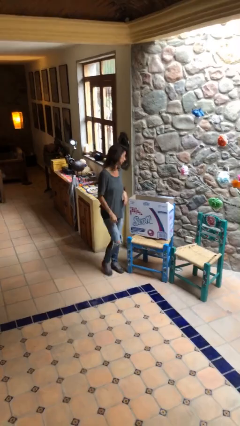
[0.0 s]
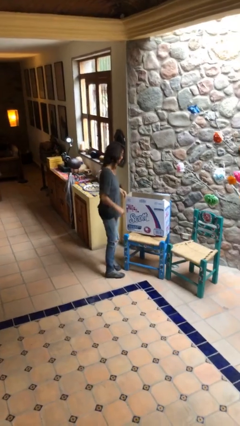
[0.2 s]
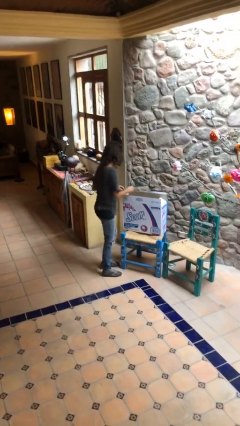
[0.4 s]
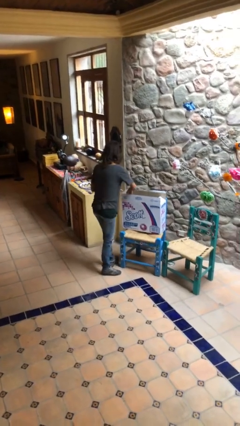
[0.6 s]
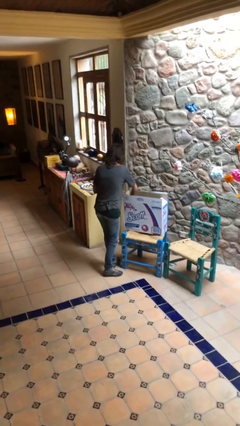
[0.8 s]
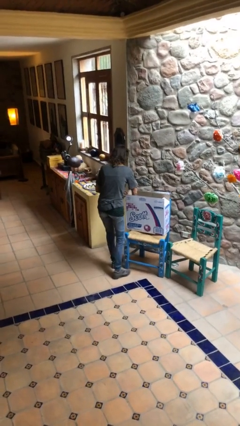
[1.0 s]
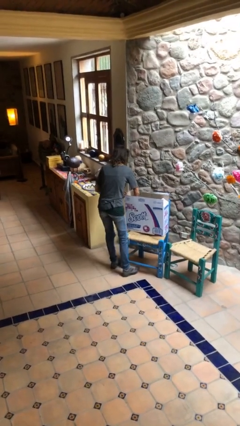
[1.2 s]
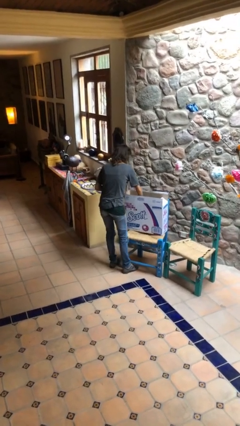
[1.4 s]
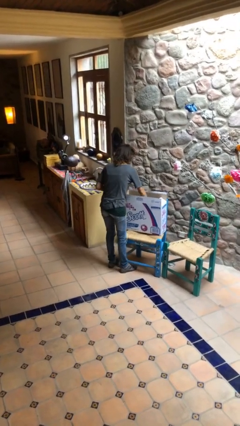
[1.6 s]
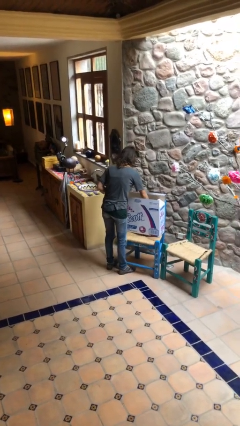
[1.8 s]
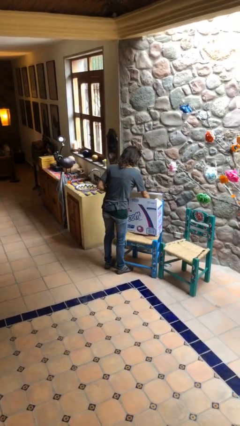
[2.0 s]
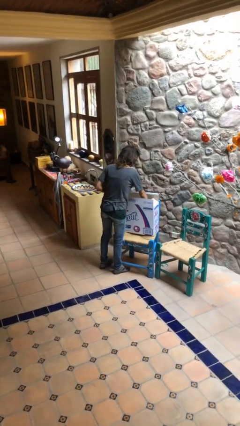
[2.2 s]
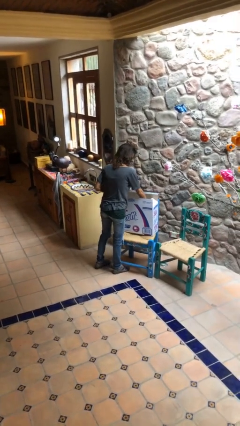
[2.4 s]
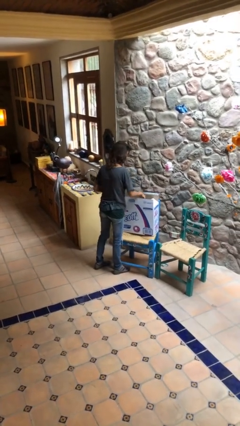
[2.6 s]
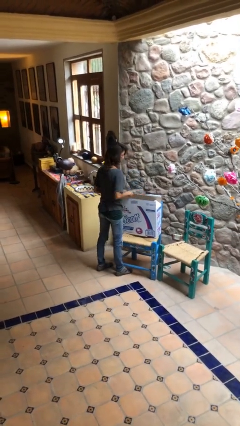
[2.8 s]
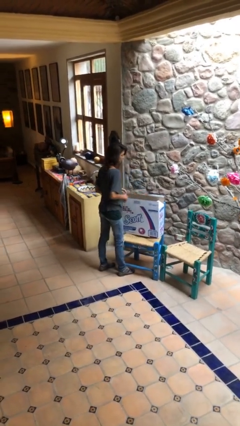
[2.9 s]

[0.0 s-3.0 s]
person searches in box

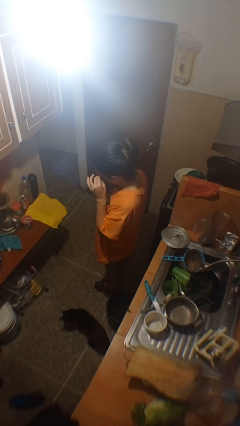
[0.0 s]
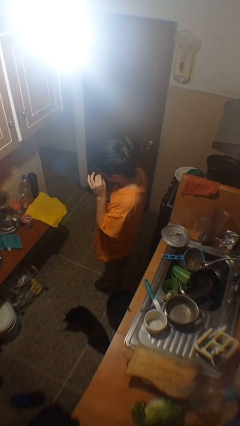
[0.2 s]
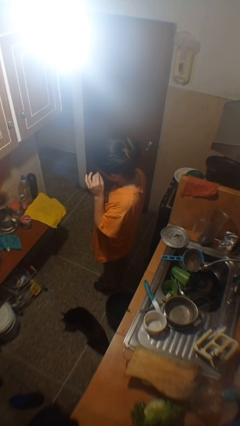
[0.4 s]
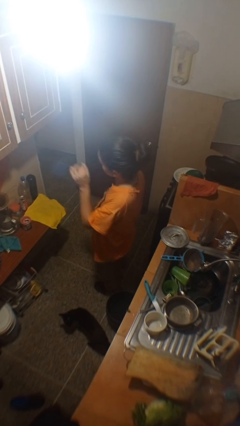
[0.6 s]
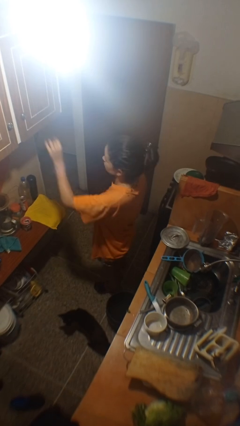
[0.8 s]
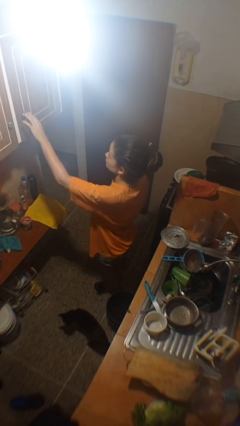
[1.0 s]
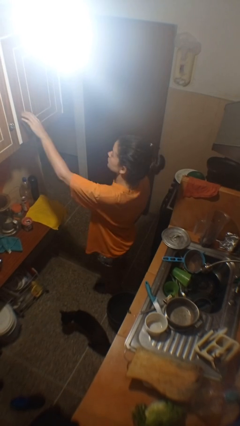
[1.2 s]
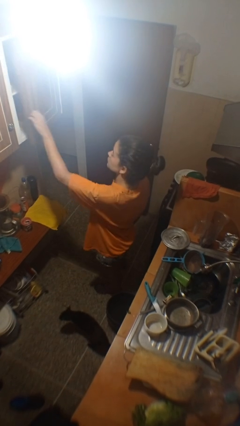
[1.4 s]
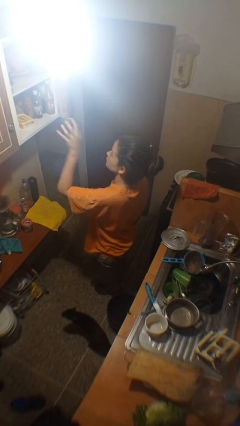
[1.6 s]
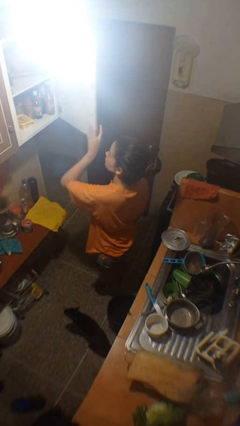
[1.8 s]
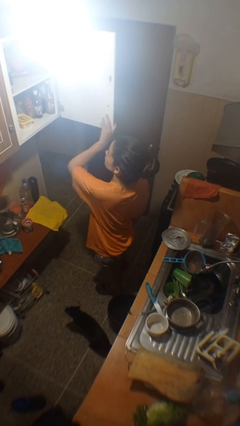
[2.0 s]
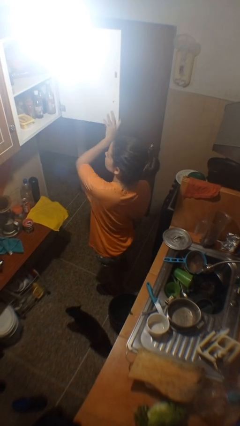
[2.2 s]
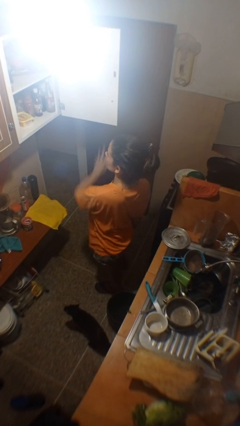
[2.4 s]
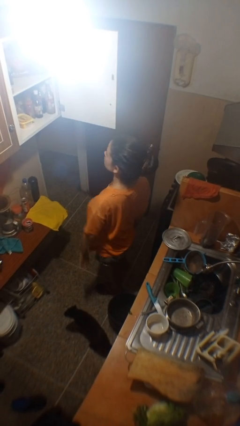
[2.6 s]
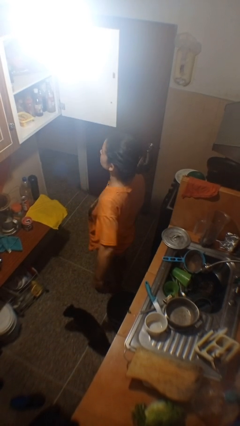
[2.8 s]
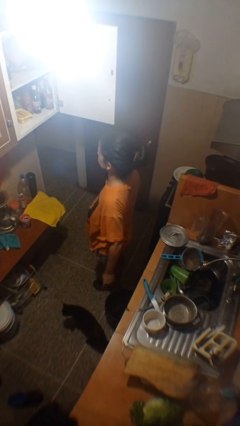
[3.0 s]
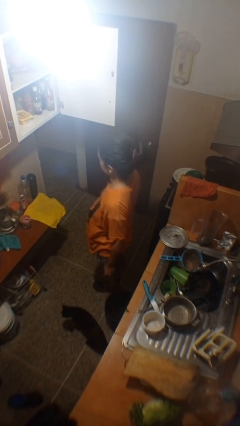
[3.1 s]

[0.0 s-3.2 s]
person opens cabinet

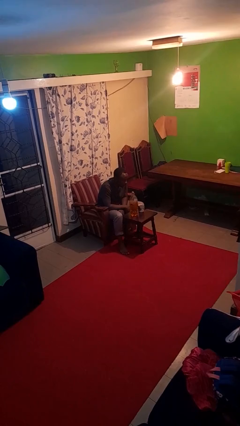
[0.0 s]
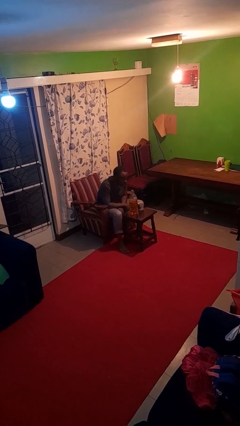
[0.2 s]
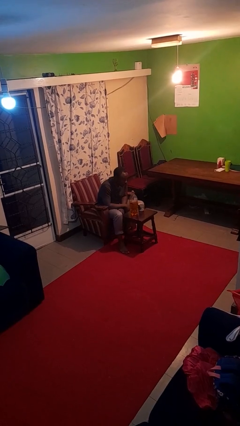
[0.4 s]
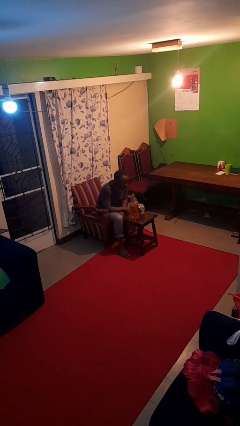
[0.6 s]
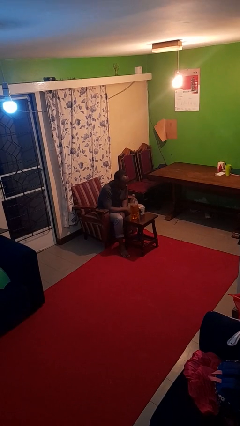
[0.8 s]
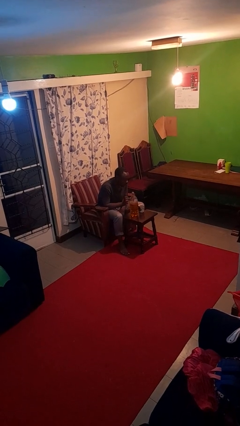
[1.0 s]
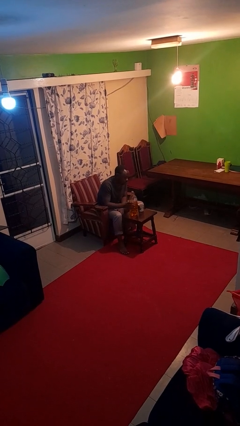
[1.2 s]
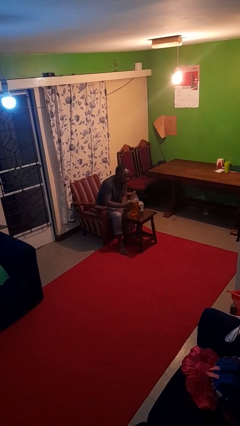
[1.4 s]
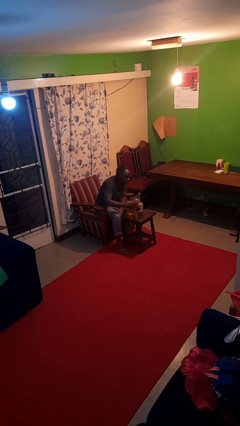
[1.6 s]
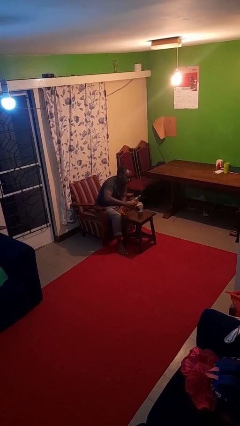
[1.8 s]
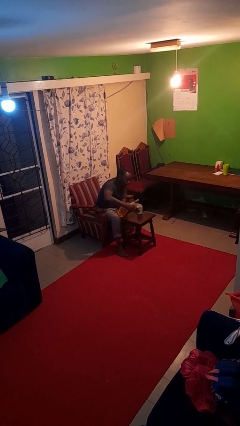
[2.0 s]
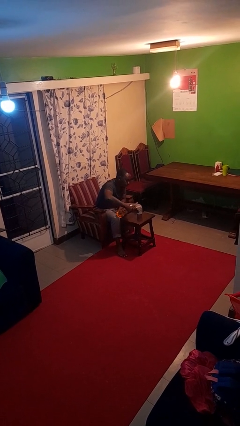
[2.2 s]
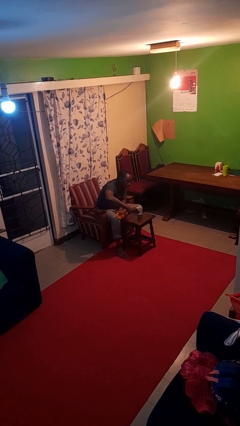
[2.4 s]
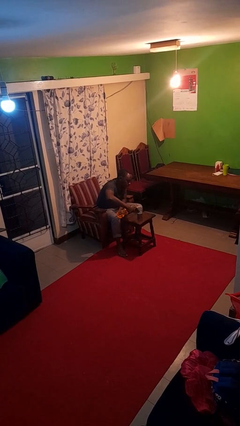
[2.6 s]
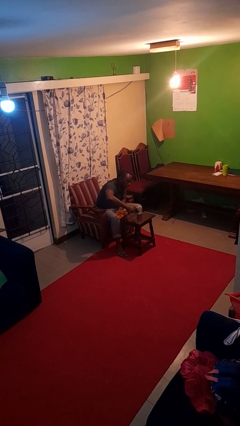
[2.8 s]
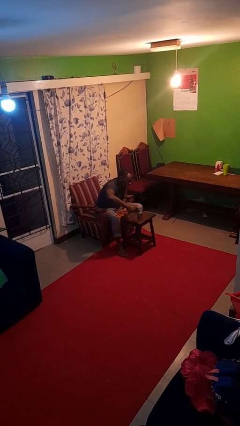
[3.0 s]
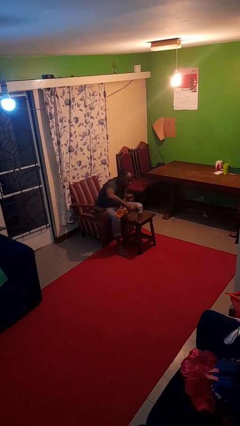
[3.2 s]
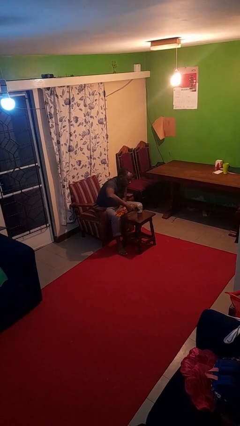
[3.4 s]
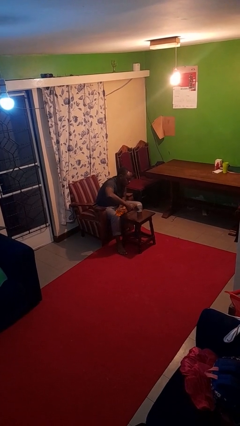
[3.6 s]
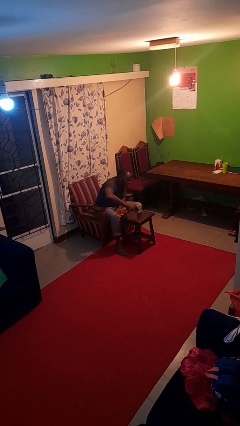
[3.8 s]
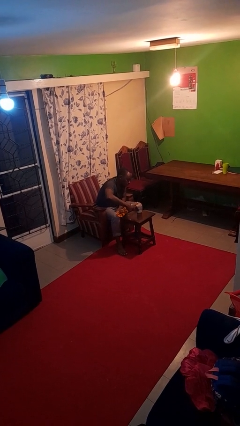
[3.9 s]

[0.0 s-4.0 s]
person pours liquid into cup

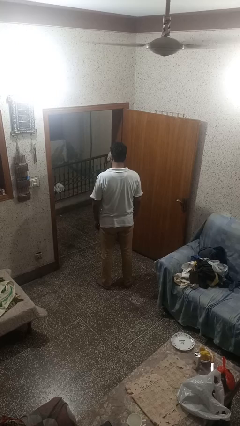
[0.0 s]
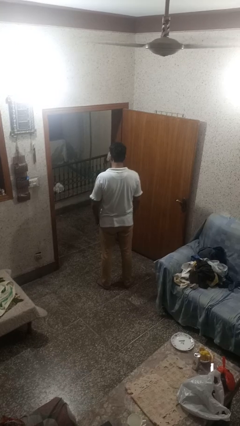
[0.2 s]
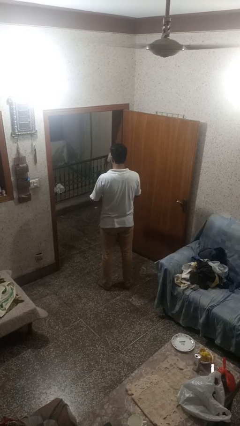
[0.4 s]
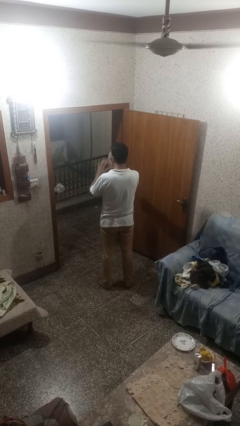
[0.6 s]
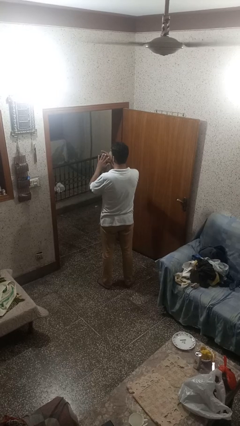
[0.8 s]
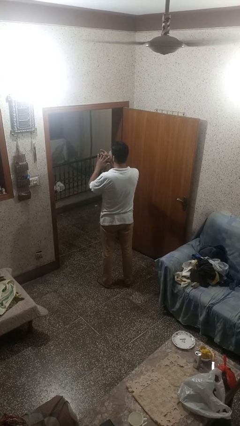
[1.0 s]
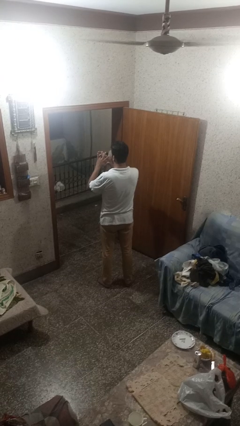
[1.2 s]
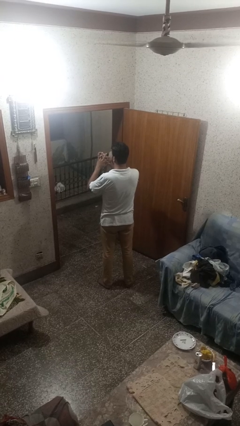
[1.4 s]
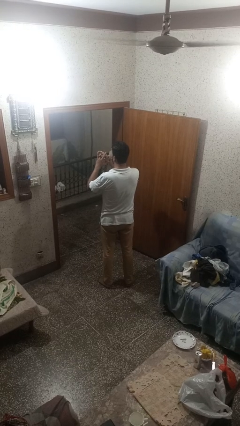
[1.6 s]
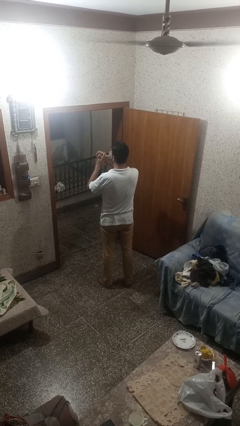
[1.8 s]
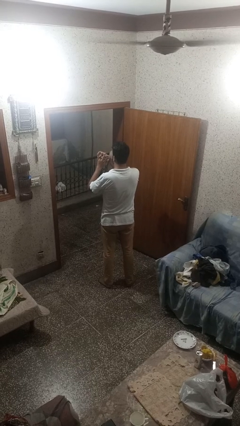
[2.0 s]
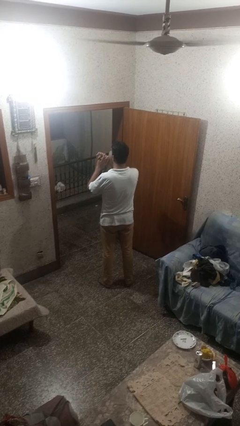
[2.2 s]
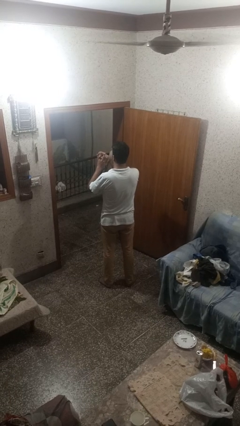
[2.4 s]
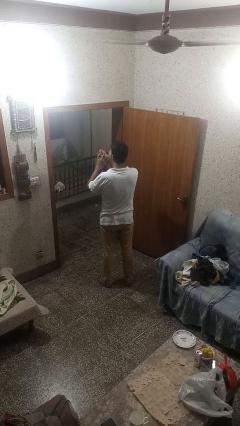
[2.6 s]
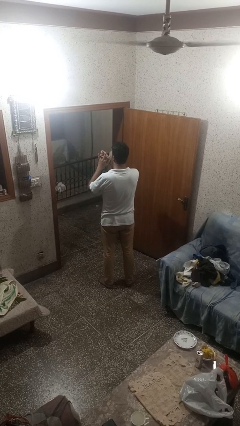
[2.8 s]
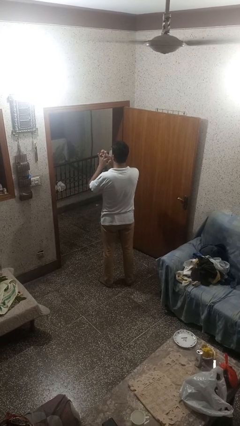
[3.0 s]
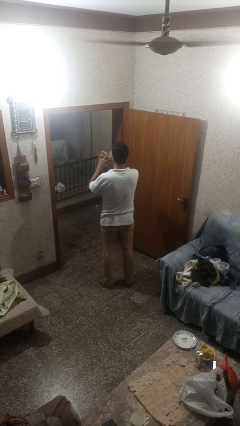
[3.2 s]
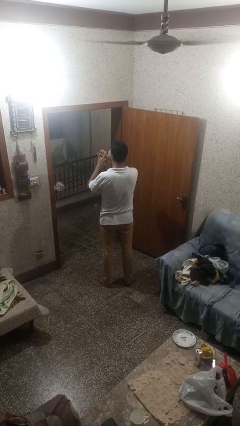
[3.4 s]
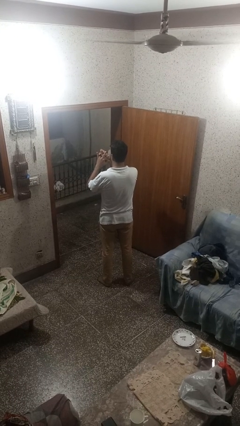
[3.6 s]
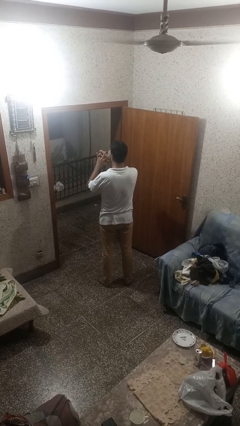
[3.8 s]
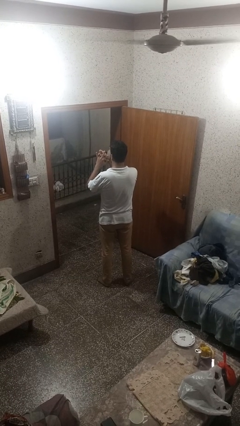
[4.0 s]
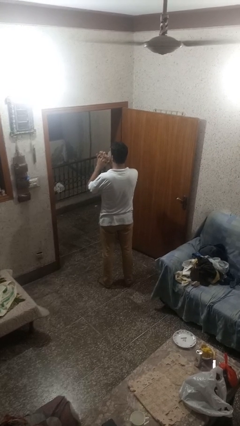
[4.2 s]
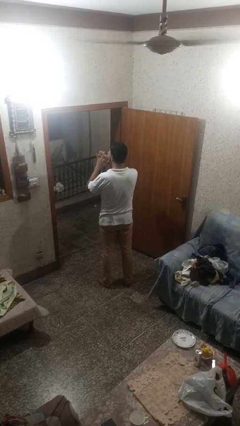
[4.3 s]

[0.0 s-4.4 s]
person puts on ring

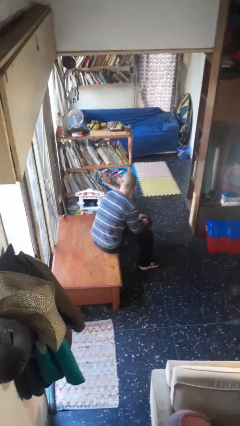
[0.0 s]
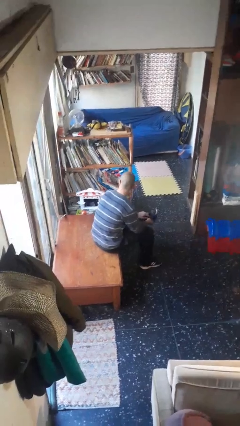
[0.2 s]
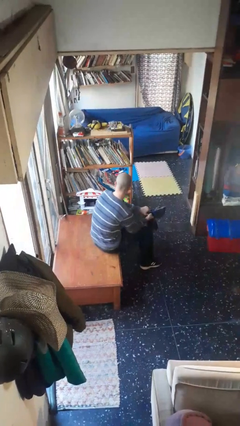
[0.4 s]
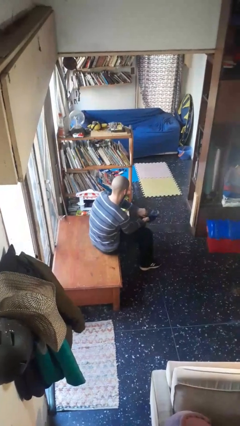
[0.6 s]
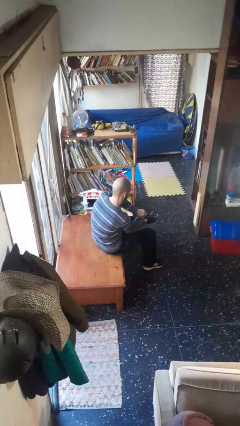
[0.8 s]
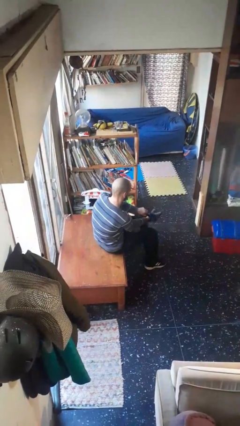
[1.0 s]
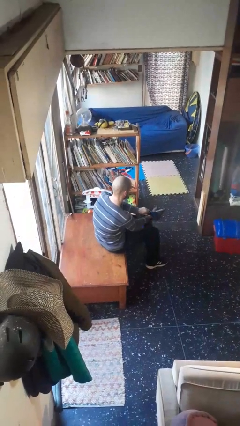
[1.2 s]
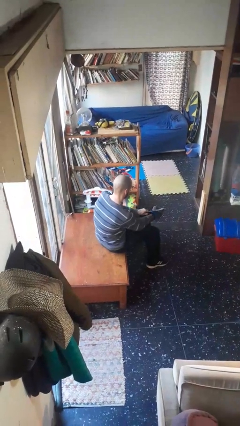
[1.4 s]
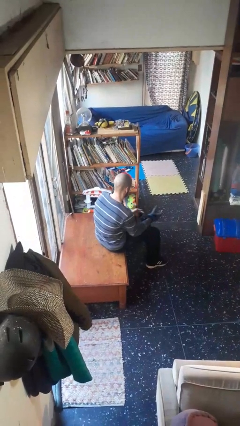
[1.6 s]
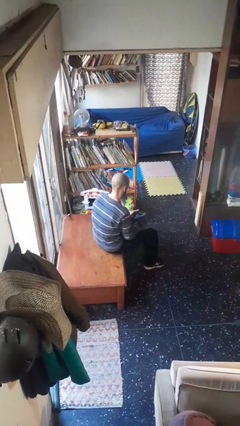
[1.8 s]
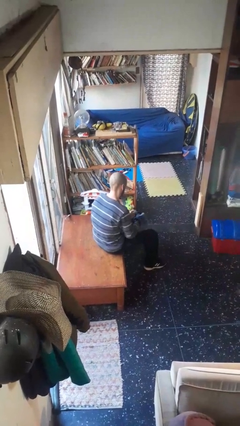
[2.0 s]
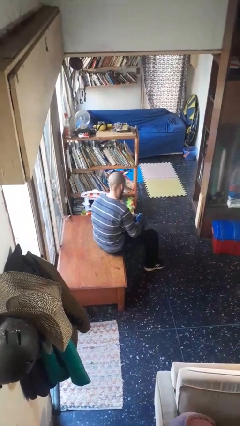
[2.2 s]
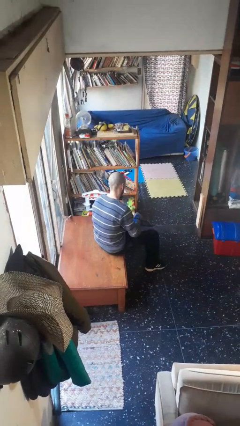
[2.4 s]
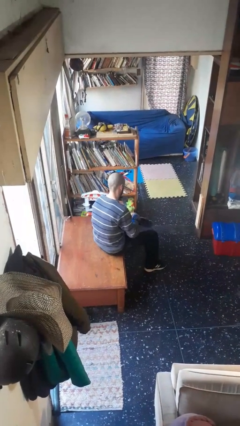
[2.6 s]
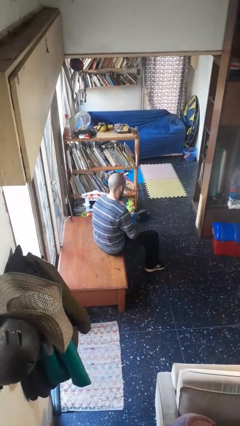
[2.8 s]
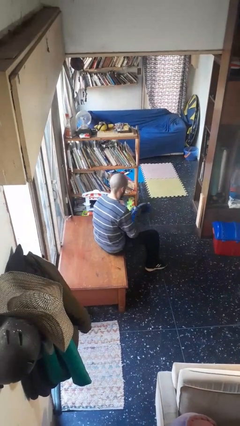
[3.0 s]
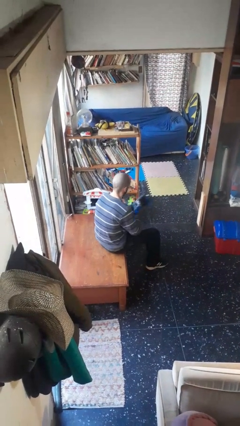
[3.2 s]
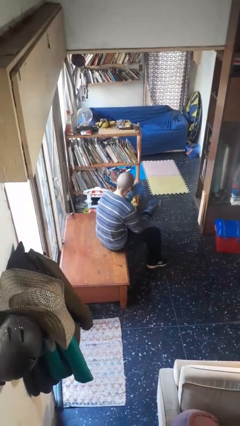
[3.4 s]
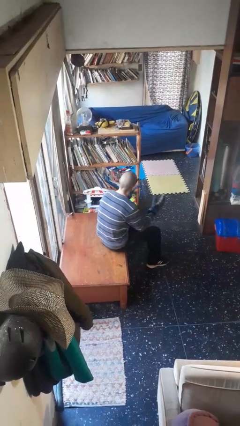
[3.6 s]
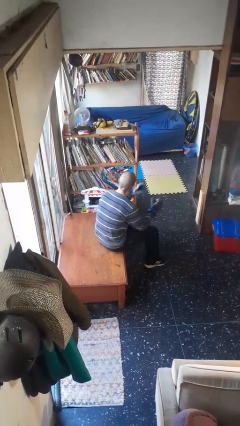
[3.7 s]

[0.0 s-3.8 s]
person puts on gloves
